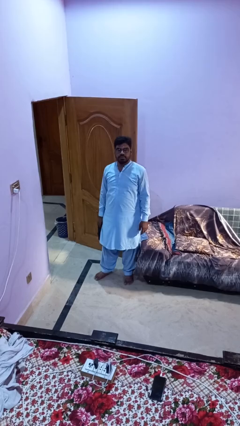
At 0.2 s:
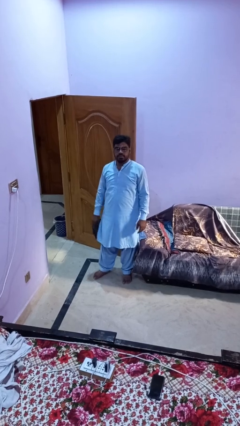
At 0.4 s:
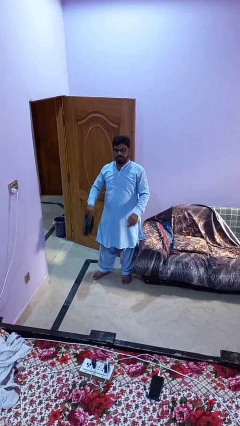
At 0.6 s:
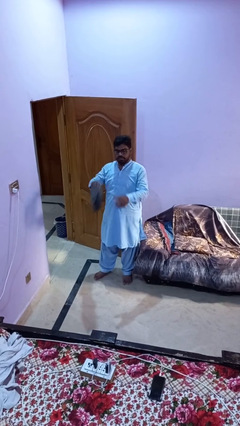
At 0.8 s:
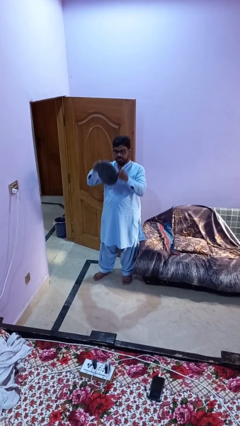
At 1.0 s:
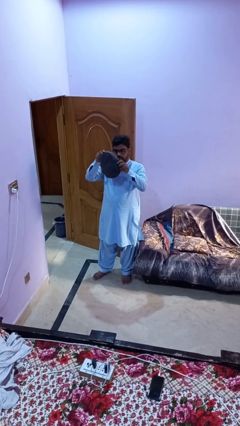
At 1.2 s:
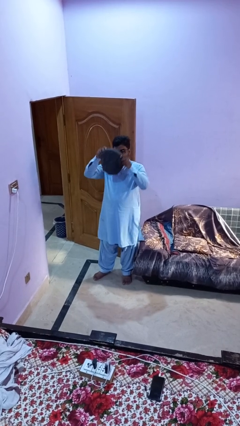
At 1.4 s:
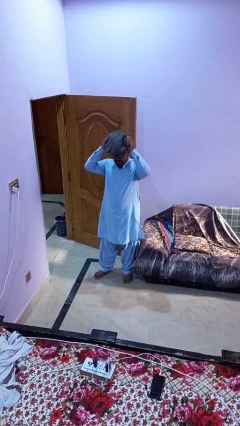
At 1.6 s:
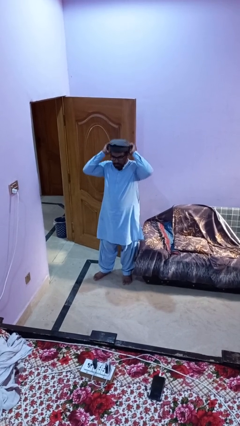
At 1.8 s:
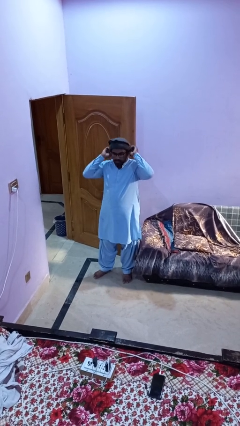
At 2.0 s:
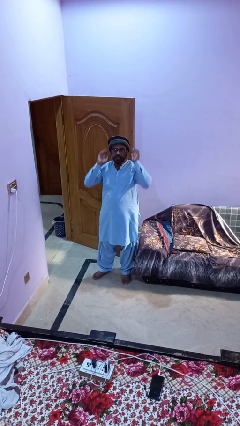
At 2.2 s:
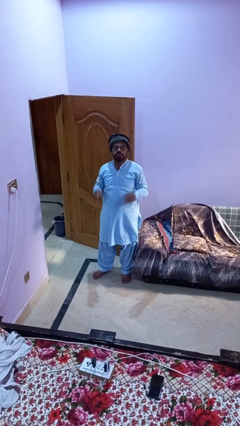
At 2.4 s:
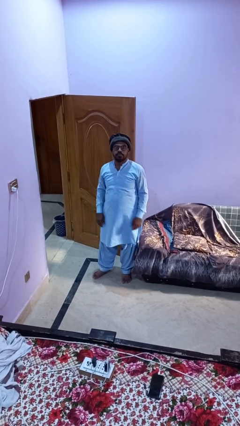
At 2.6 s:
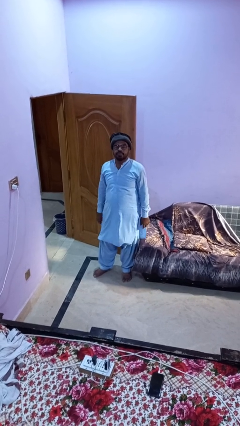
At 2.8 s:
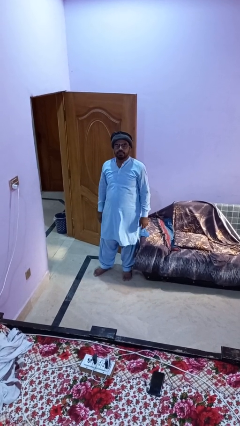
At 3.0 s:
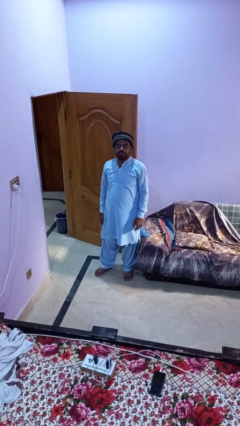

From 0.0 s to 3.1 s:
person puts on hat

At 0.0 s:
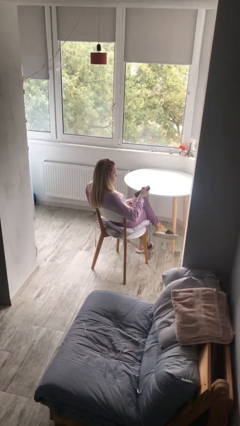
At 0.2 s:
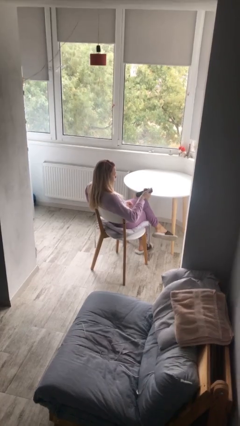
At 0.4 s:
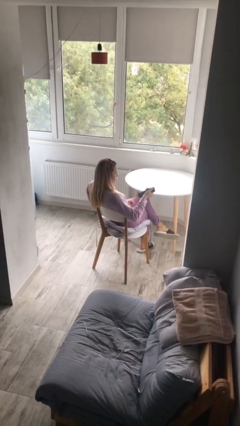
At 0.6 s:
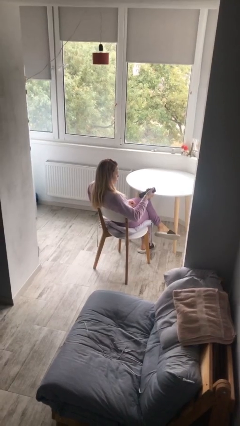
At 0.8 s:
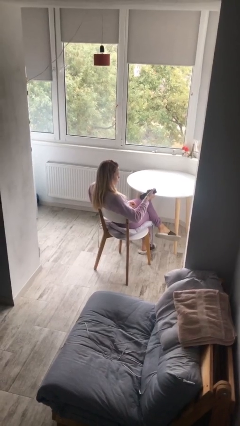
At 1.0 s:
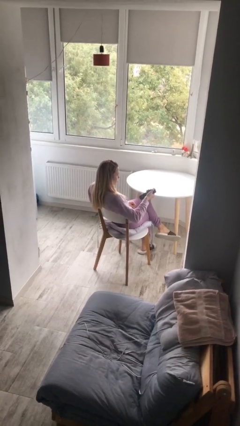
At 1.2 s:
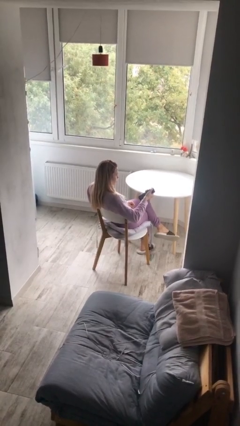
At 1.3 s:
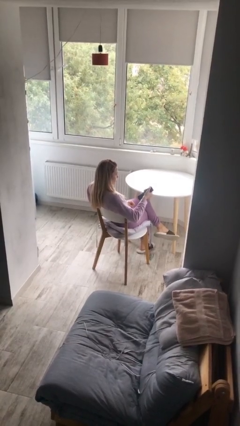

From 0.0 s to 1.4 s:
person uses television remote

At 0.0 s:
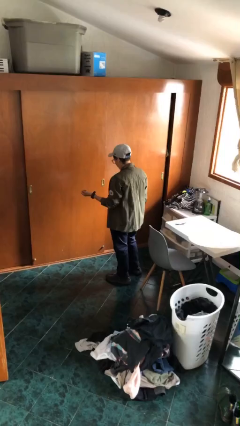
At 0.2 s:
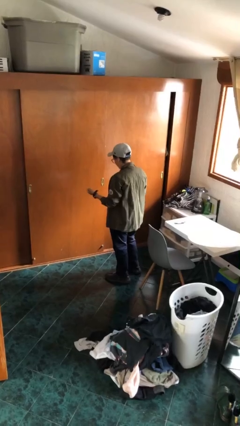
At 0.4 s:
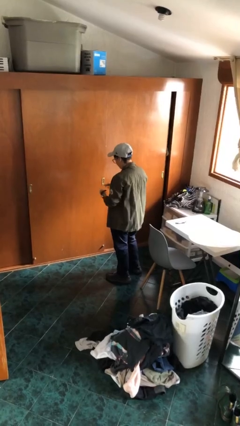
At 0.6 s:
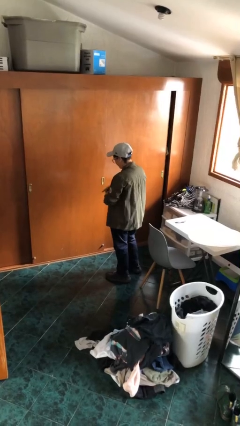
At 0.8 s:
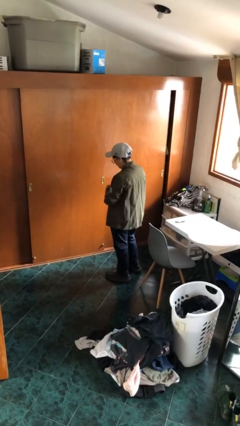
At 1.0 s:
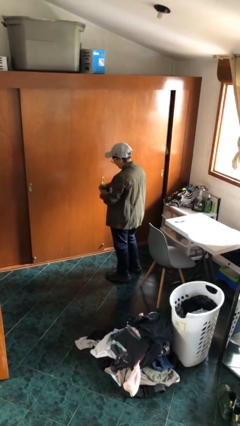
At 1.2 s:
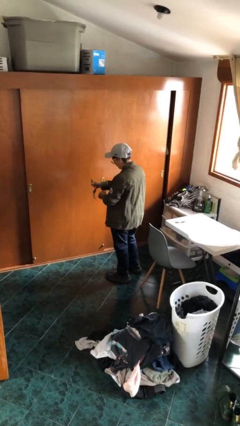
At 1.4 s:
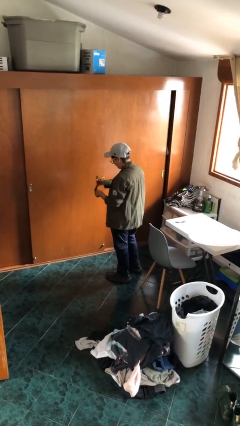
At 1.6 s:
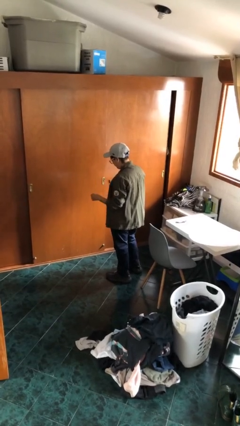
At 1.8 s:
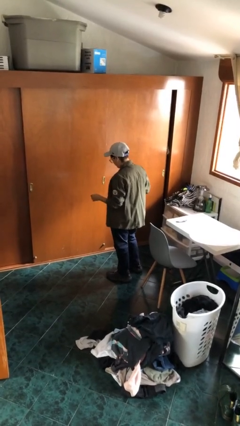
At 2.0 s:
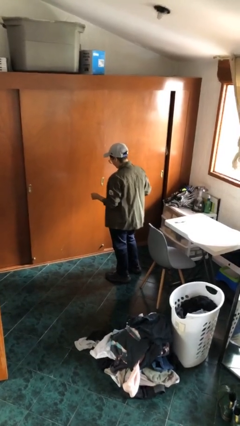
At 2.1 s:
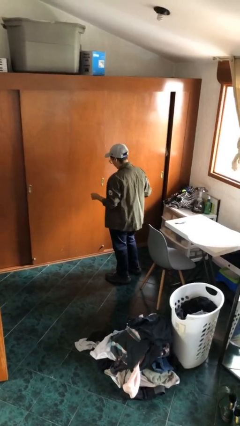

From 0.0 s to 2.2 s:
person takes off wristwatch

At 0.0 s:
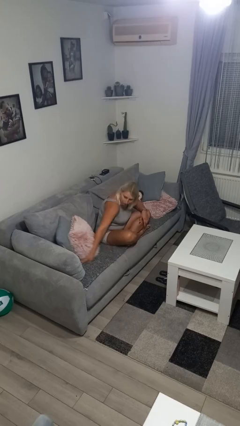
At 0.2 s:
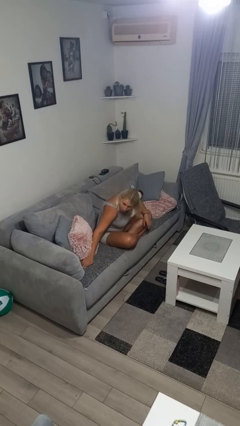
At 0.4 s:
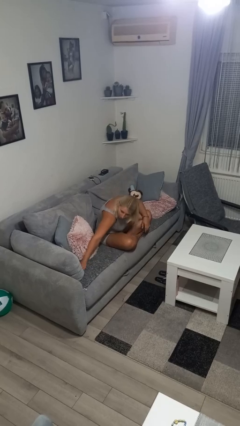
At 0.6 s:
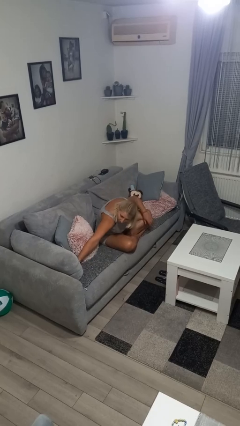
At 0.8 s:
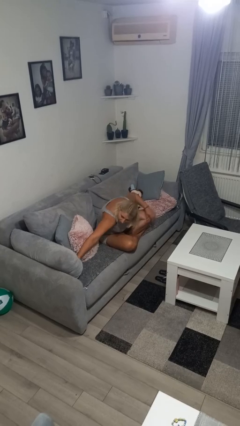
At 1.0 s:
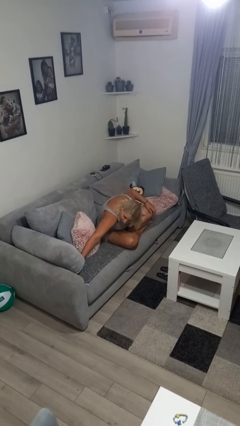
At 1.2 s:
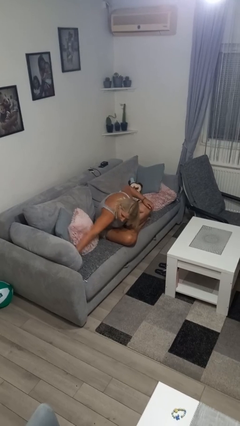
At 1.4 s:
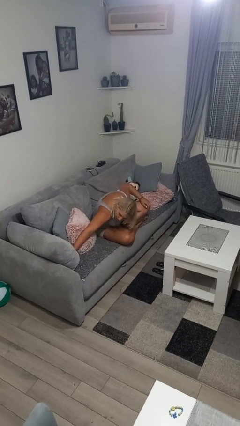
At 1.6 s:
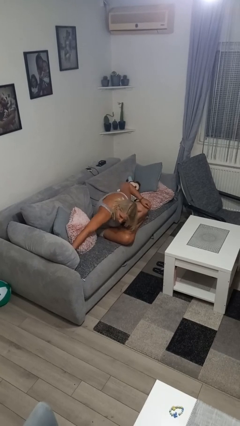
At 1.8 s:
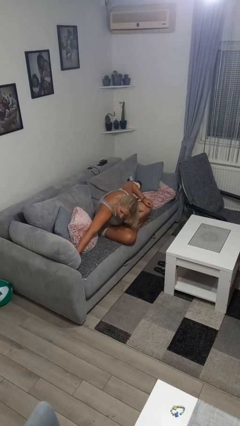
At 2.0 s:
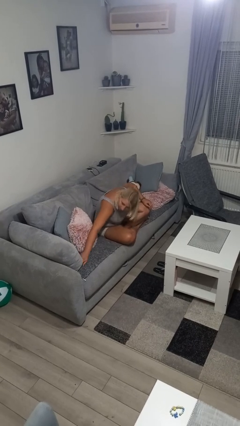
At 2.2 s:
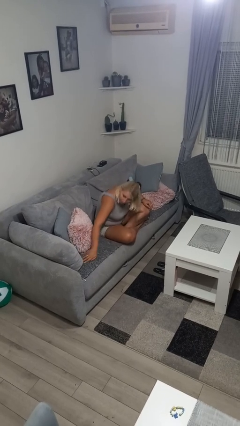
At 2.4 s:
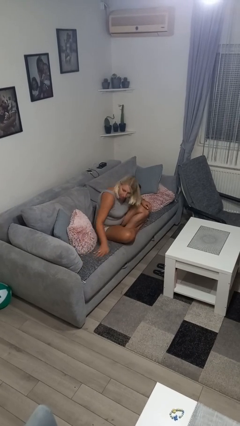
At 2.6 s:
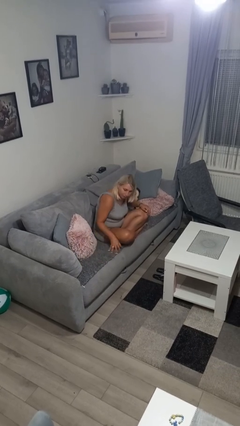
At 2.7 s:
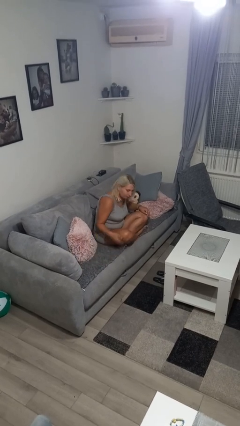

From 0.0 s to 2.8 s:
person searches in couch

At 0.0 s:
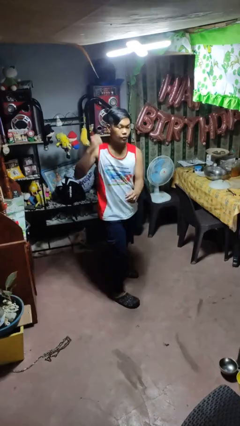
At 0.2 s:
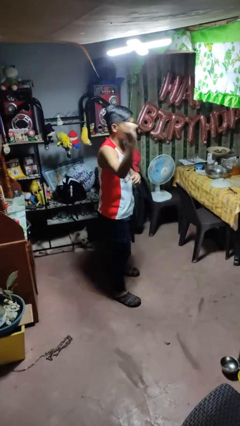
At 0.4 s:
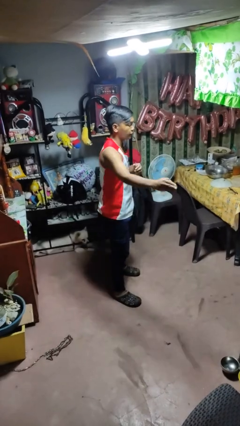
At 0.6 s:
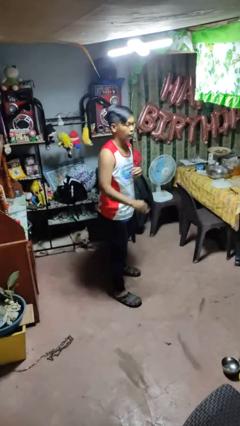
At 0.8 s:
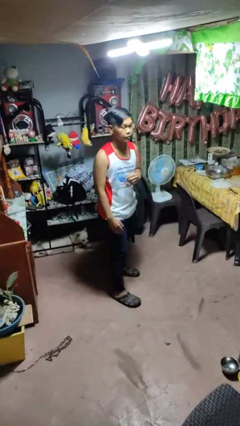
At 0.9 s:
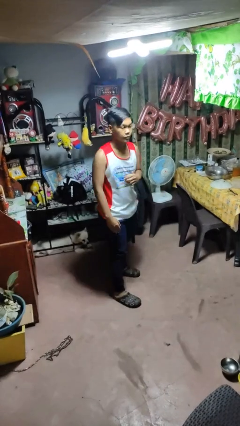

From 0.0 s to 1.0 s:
person karate chop

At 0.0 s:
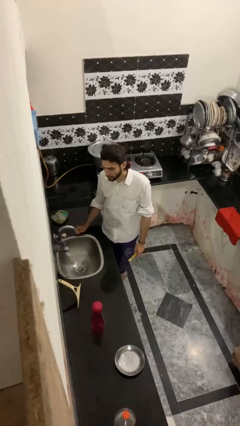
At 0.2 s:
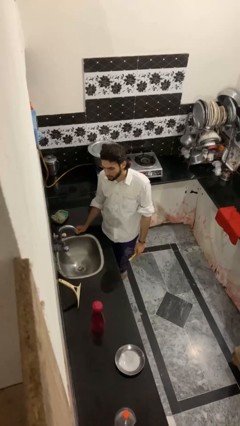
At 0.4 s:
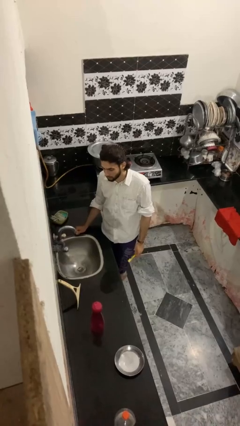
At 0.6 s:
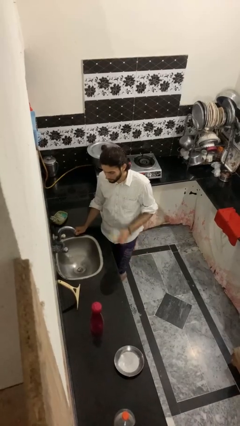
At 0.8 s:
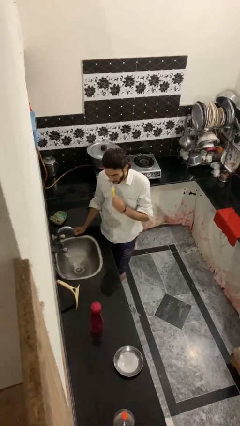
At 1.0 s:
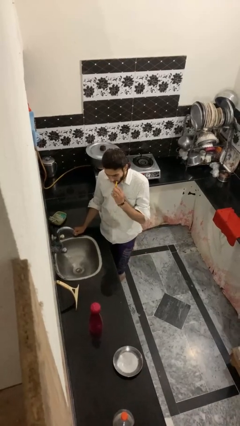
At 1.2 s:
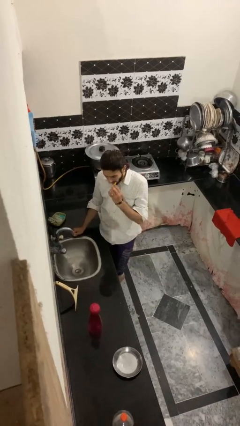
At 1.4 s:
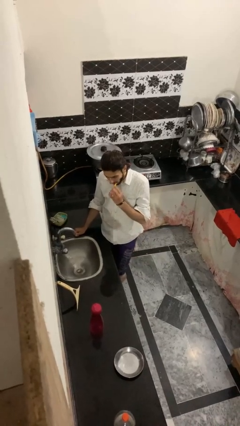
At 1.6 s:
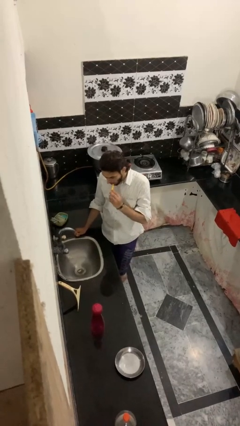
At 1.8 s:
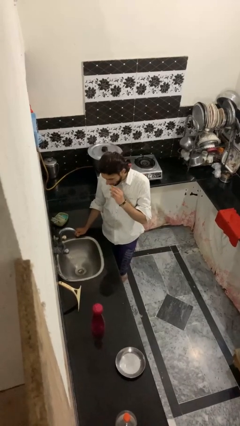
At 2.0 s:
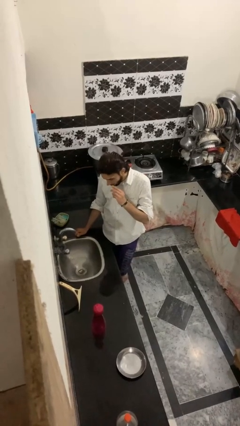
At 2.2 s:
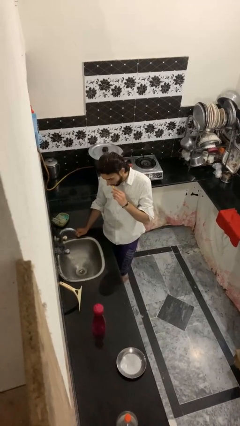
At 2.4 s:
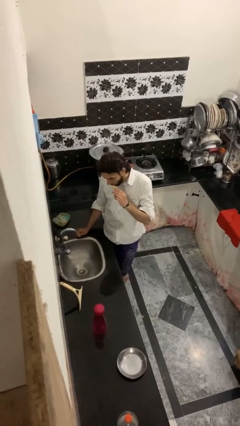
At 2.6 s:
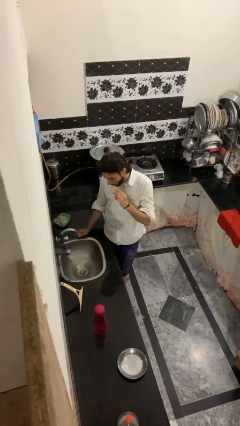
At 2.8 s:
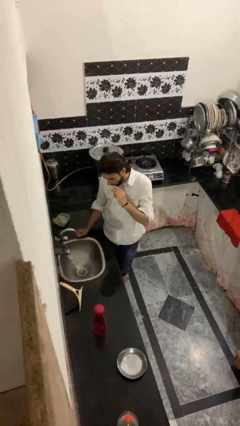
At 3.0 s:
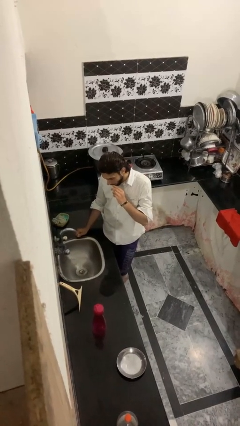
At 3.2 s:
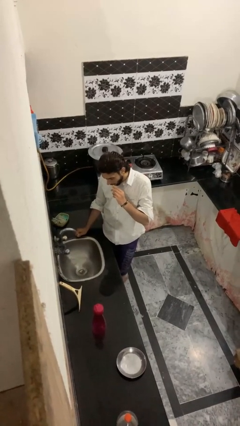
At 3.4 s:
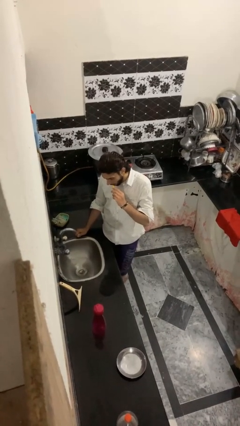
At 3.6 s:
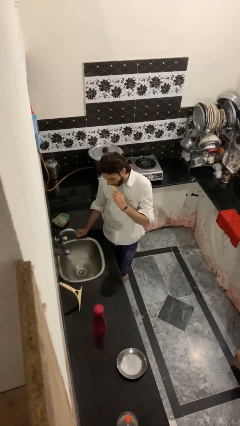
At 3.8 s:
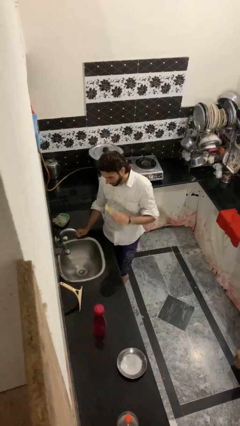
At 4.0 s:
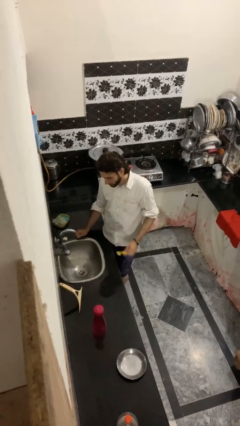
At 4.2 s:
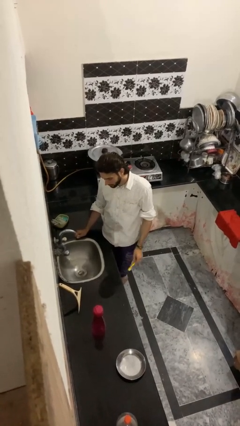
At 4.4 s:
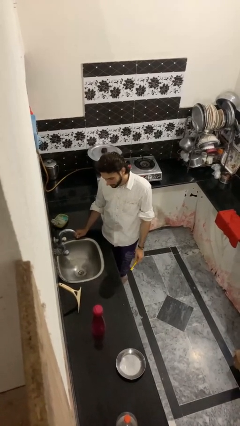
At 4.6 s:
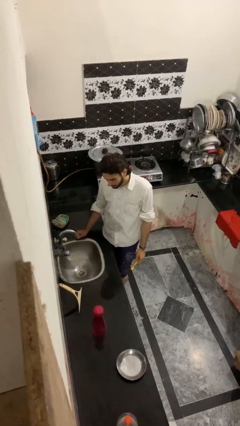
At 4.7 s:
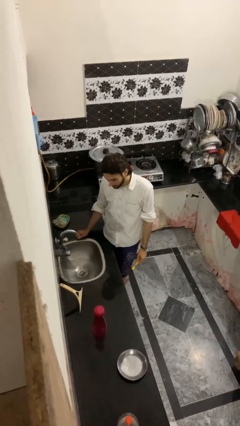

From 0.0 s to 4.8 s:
person brushes teeth

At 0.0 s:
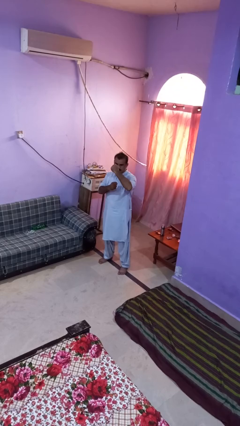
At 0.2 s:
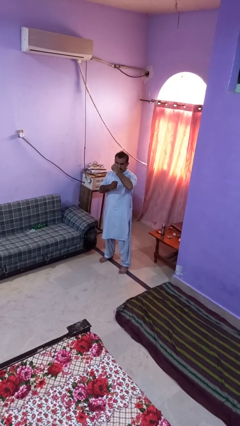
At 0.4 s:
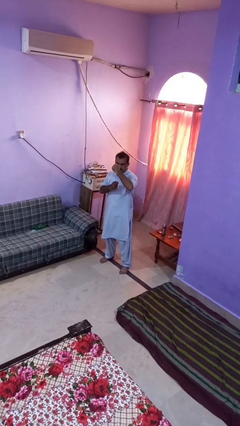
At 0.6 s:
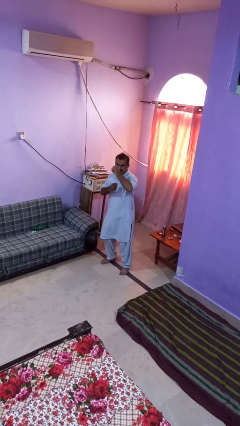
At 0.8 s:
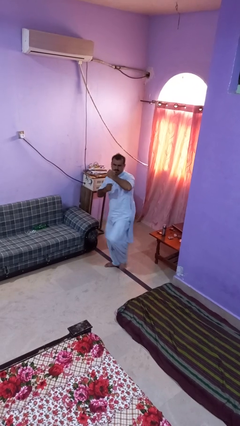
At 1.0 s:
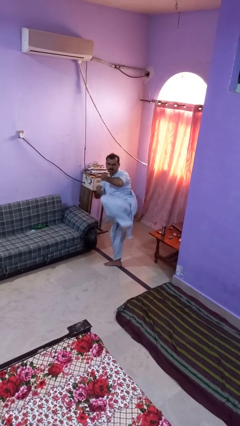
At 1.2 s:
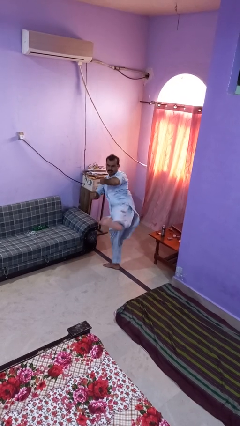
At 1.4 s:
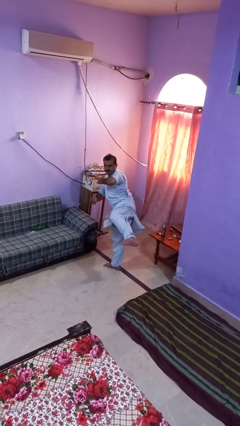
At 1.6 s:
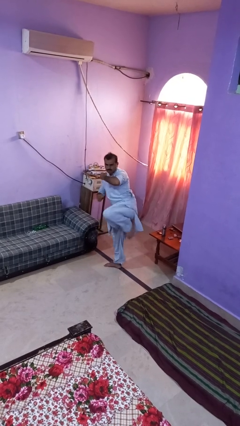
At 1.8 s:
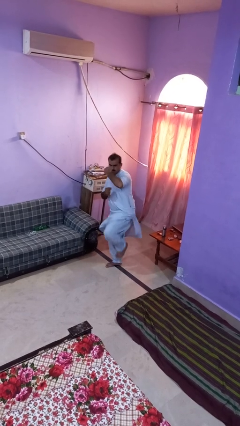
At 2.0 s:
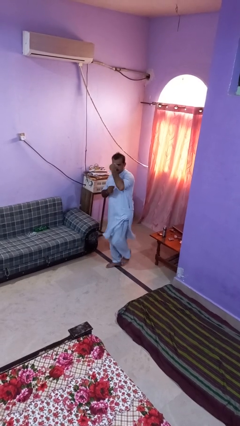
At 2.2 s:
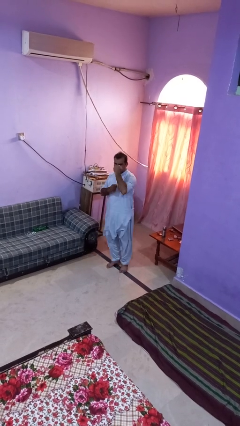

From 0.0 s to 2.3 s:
person karate kicks
